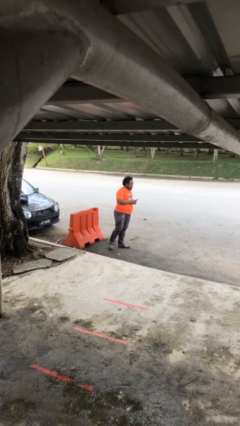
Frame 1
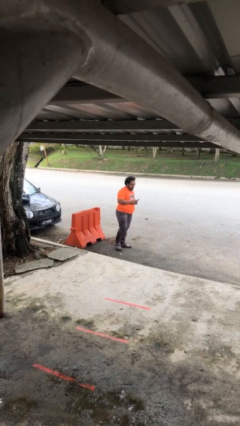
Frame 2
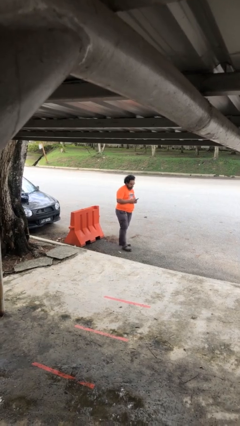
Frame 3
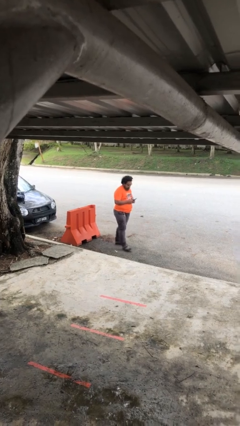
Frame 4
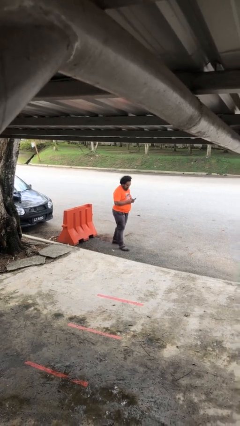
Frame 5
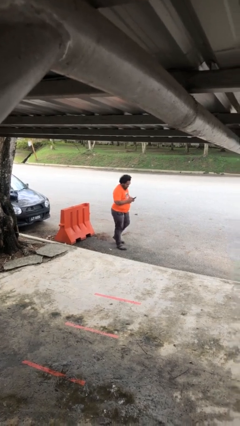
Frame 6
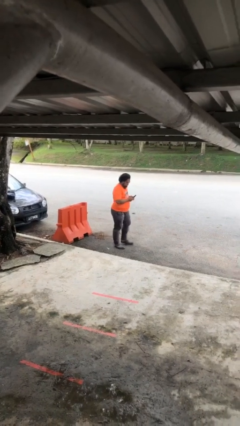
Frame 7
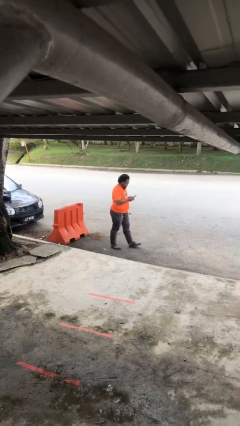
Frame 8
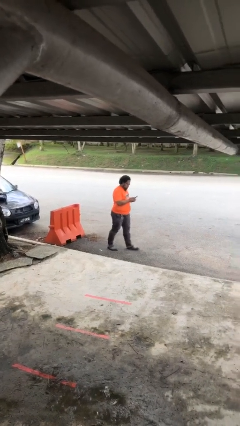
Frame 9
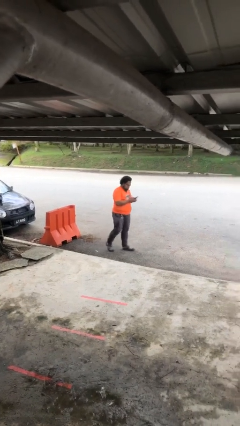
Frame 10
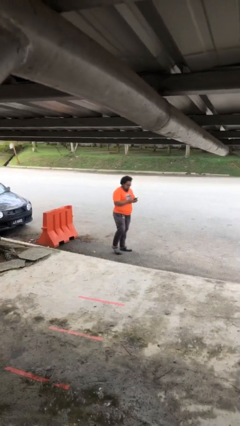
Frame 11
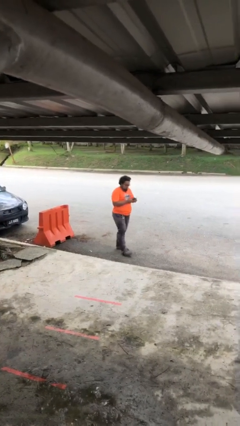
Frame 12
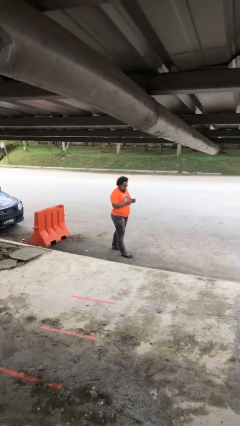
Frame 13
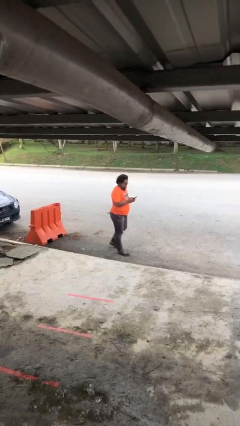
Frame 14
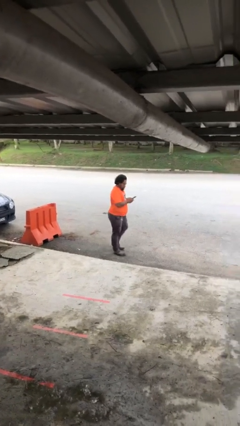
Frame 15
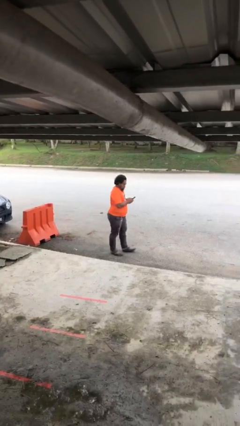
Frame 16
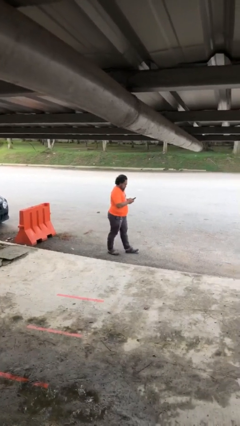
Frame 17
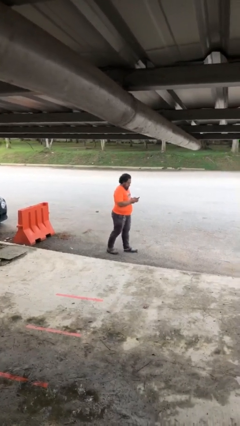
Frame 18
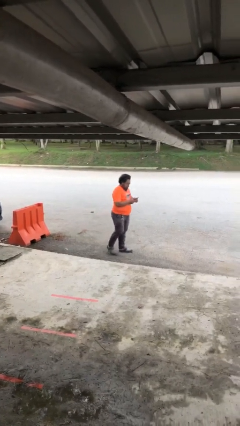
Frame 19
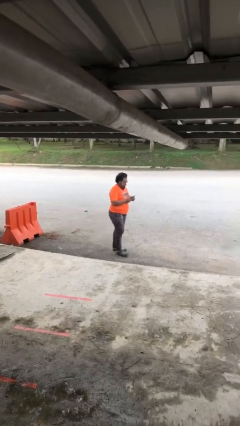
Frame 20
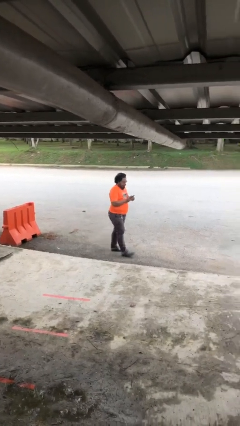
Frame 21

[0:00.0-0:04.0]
person texts on phone

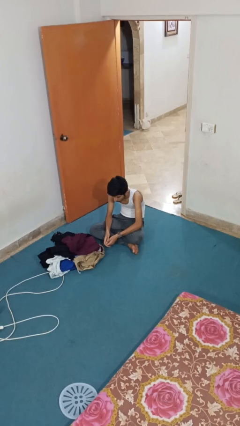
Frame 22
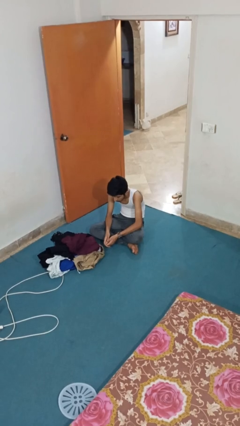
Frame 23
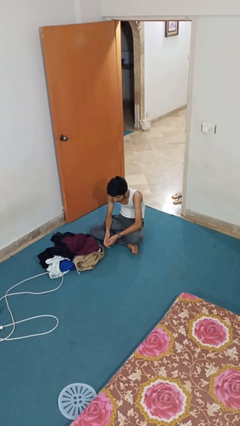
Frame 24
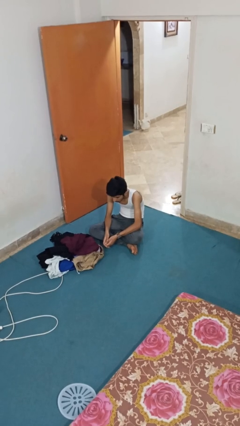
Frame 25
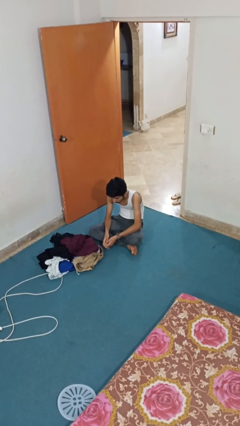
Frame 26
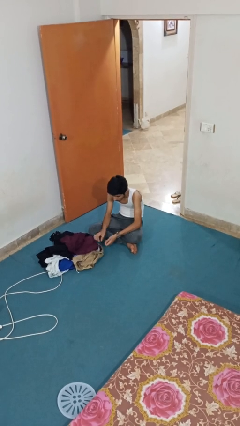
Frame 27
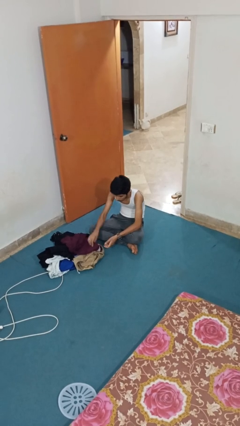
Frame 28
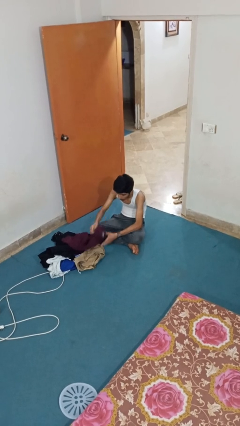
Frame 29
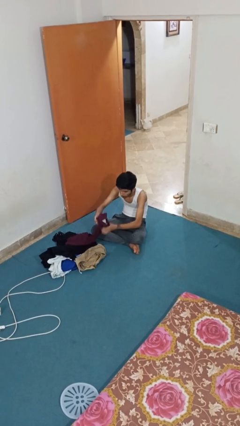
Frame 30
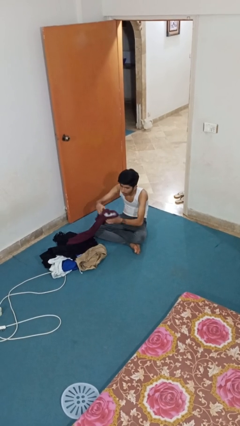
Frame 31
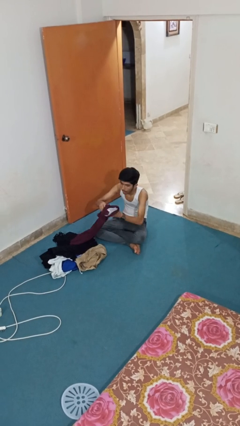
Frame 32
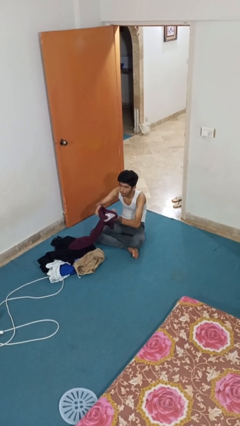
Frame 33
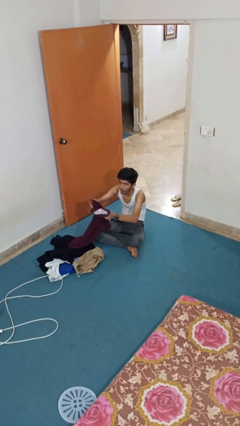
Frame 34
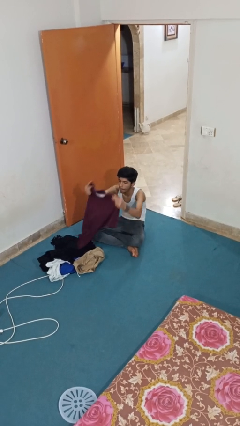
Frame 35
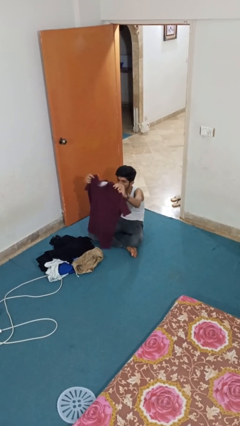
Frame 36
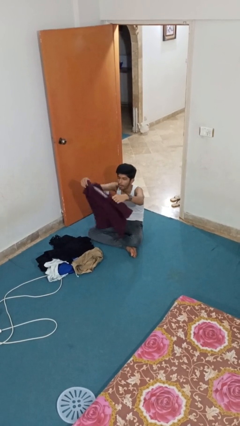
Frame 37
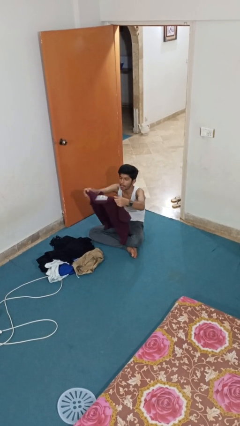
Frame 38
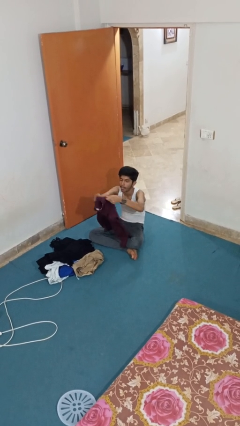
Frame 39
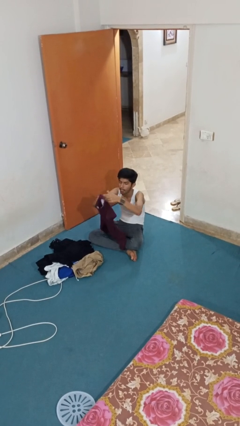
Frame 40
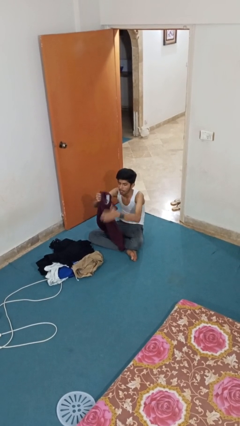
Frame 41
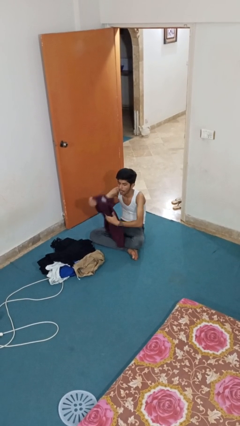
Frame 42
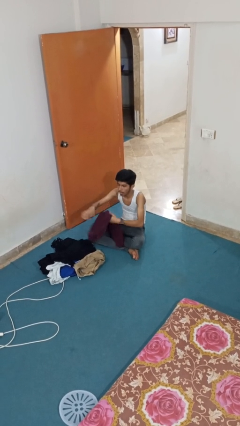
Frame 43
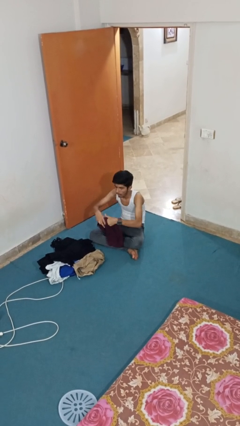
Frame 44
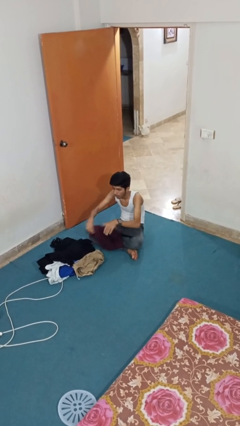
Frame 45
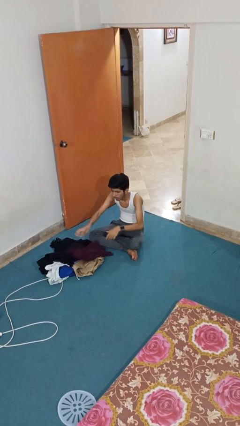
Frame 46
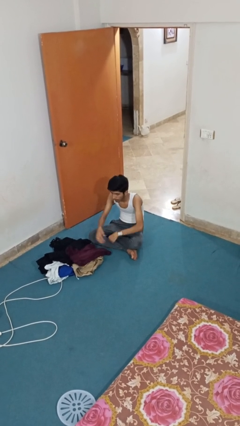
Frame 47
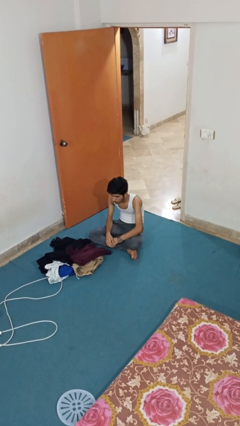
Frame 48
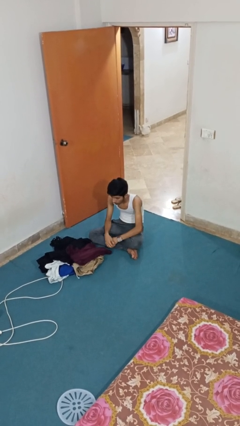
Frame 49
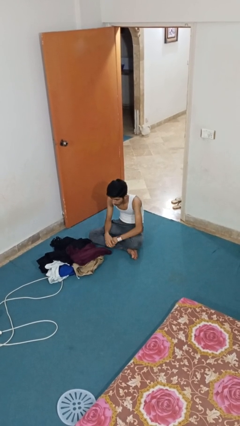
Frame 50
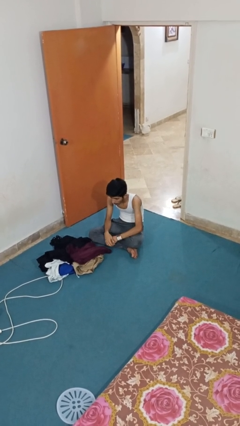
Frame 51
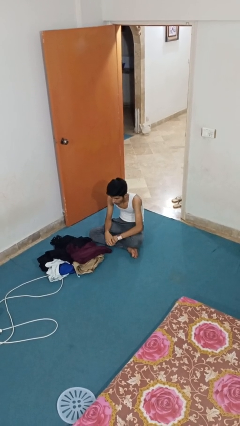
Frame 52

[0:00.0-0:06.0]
person folds shirt

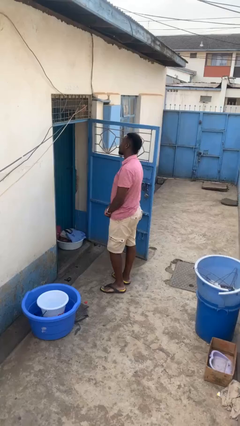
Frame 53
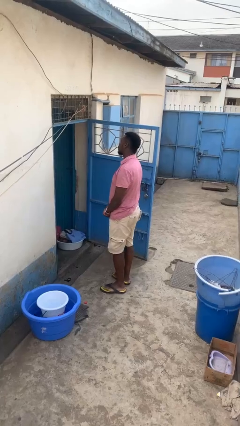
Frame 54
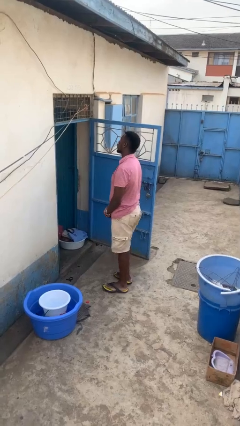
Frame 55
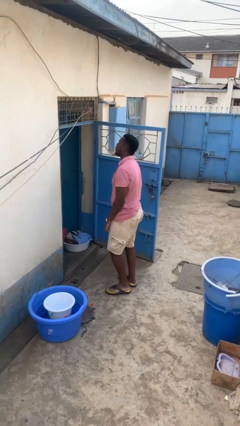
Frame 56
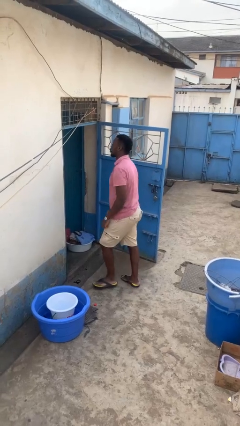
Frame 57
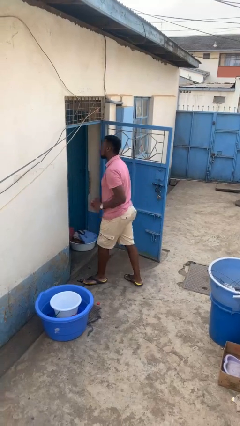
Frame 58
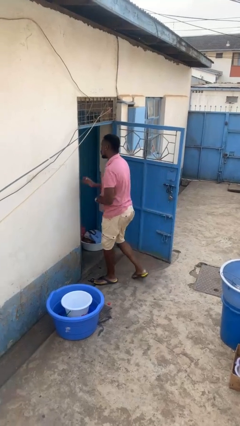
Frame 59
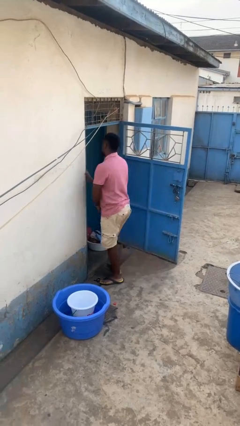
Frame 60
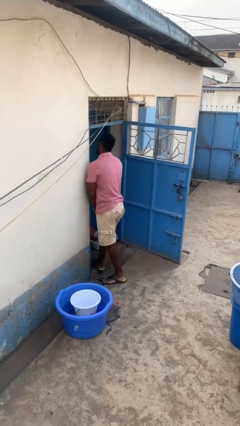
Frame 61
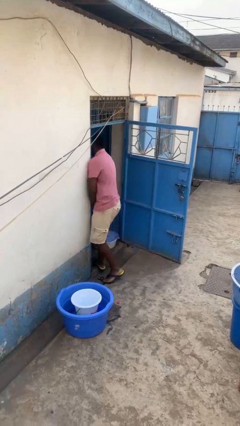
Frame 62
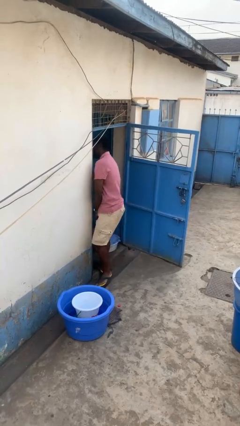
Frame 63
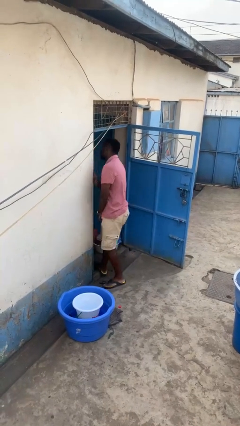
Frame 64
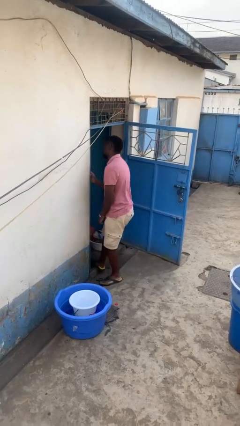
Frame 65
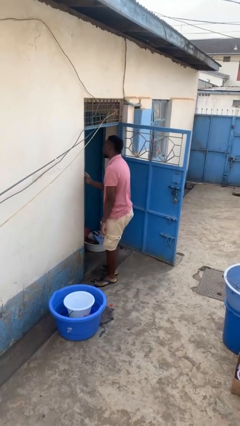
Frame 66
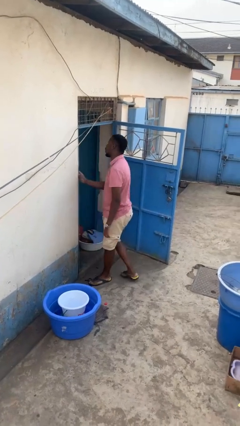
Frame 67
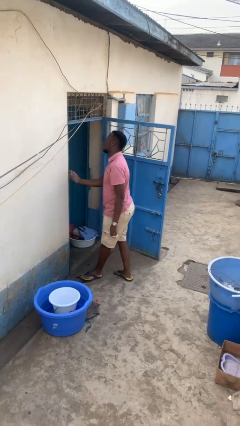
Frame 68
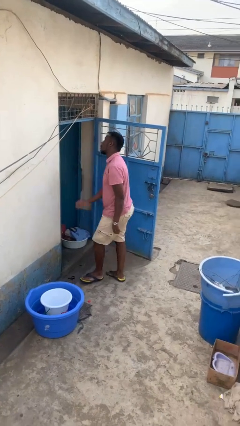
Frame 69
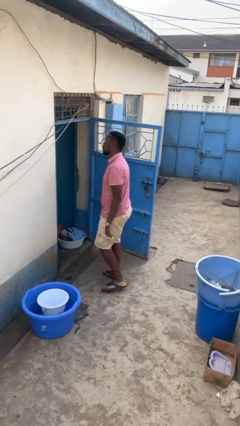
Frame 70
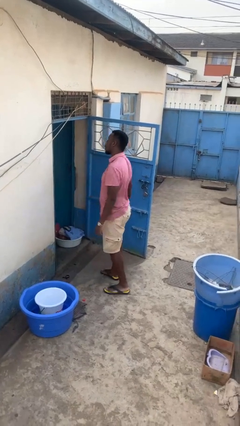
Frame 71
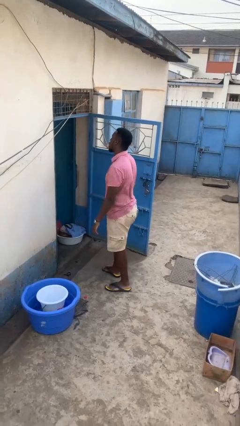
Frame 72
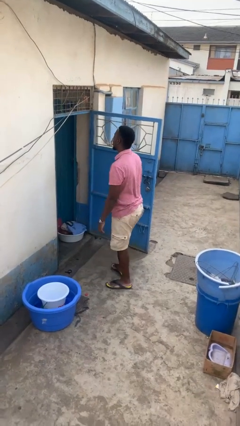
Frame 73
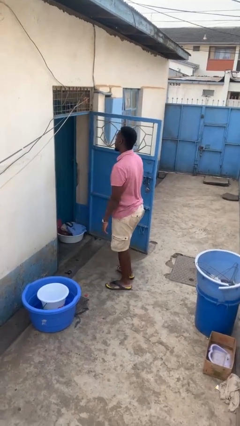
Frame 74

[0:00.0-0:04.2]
person bumps into wall

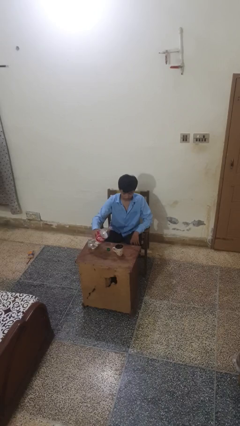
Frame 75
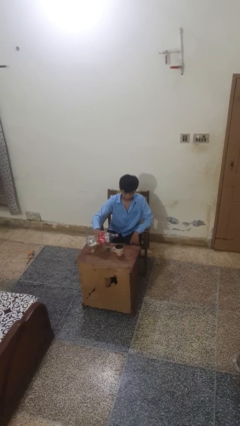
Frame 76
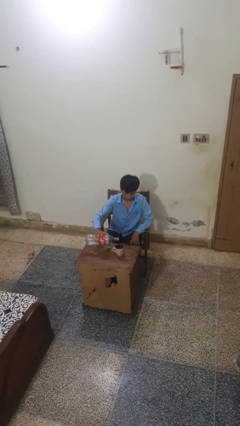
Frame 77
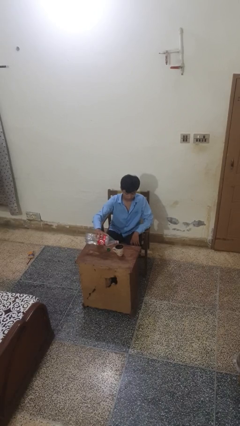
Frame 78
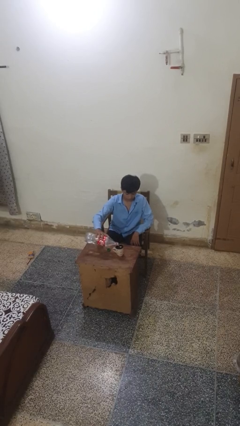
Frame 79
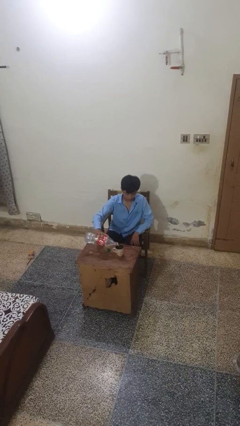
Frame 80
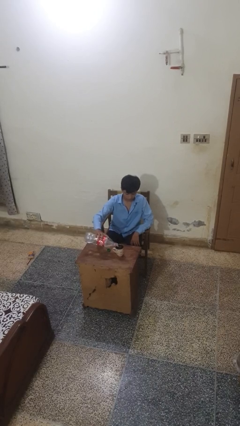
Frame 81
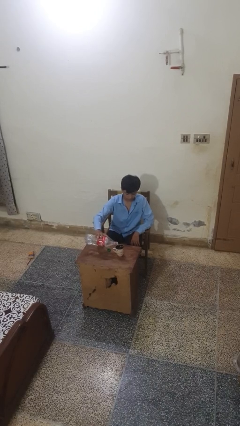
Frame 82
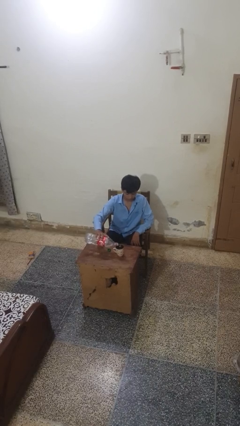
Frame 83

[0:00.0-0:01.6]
person pours liquid into cup

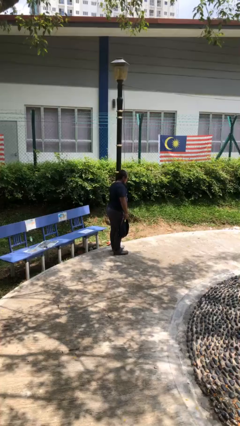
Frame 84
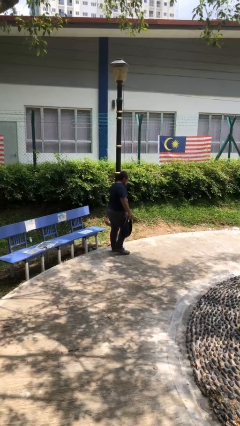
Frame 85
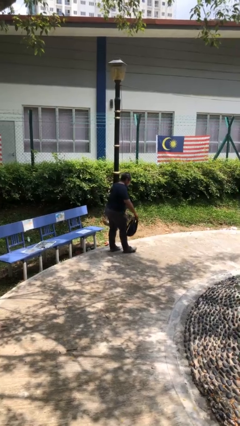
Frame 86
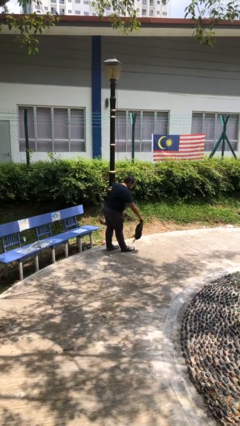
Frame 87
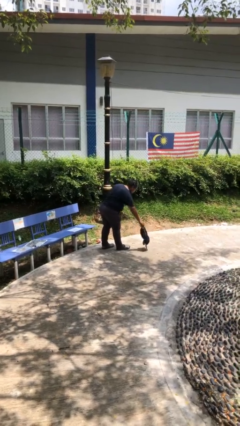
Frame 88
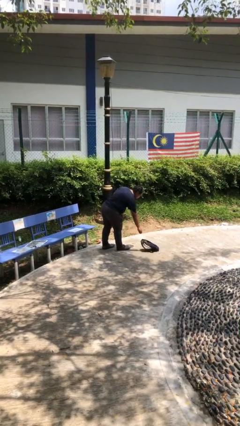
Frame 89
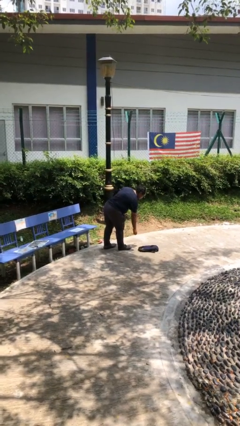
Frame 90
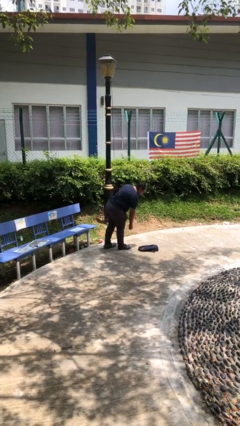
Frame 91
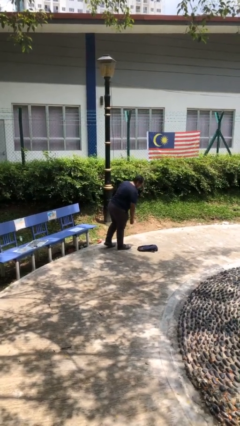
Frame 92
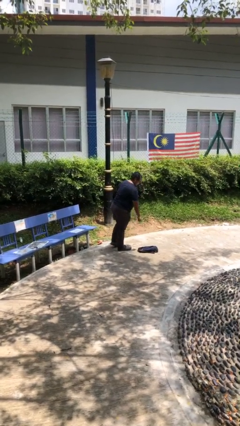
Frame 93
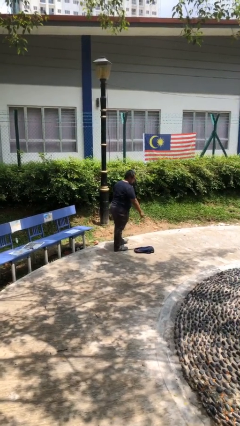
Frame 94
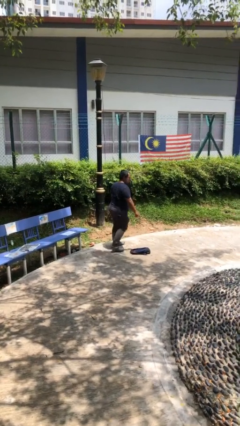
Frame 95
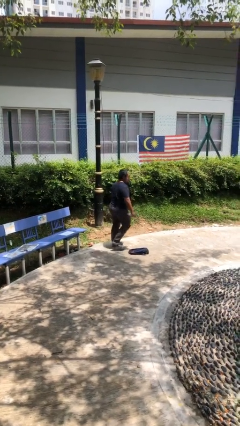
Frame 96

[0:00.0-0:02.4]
person puts down object on floor
